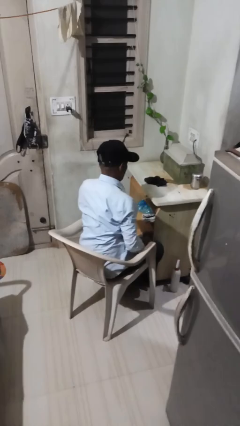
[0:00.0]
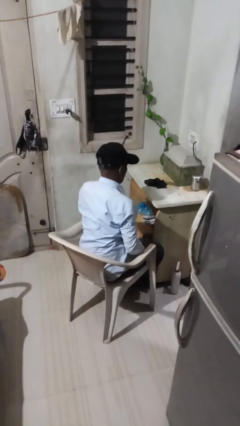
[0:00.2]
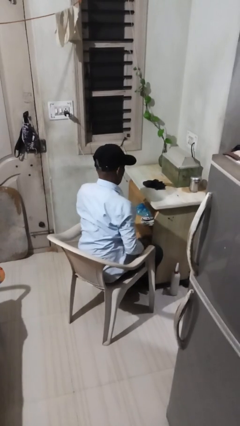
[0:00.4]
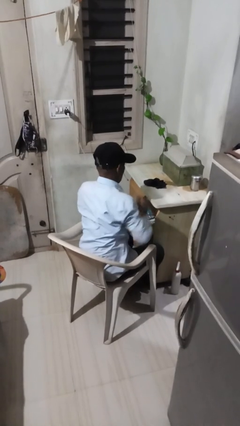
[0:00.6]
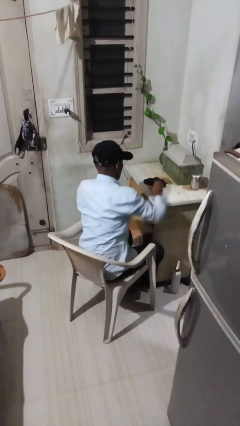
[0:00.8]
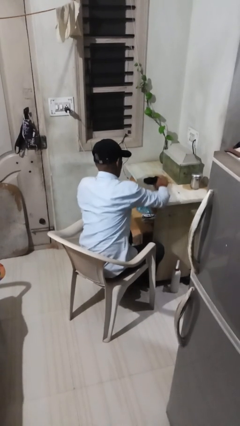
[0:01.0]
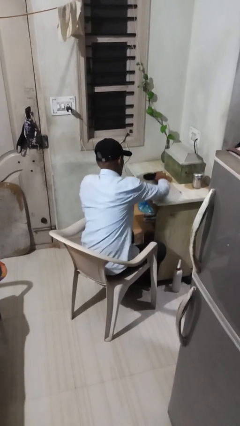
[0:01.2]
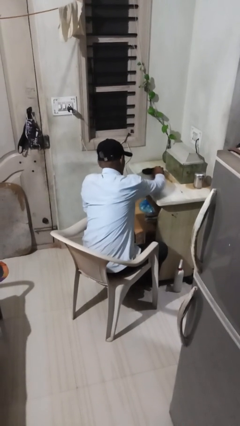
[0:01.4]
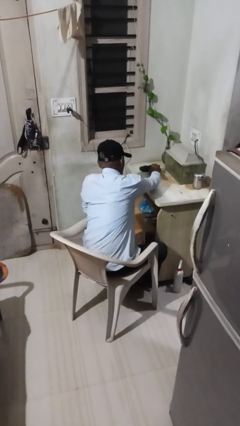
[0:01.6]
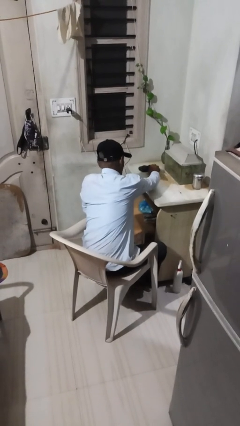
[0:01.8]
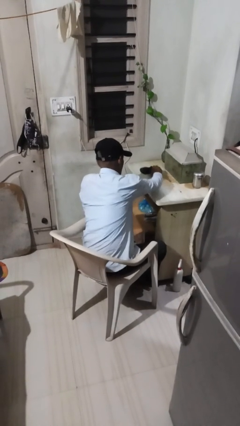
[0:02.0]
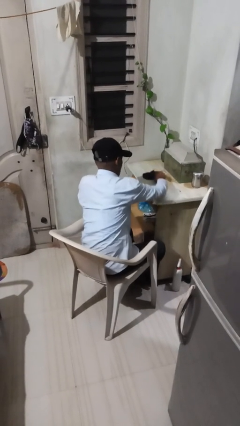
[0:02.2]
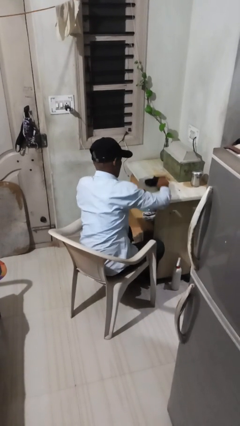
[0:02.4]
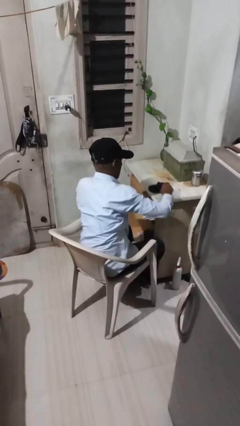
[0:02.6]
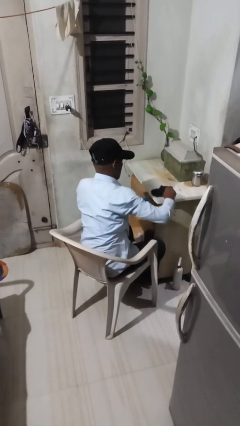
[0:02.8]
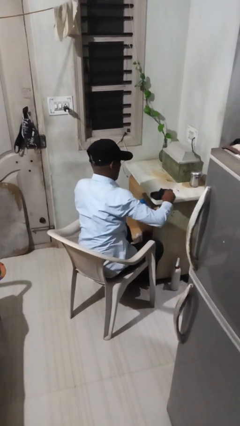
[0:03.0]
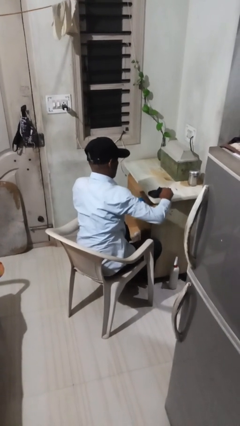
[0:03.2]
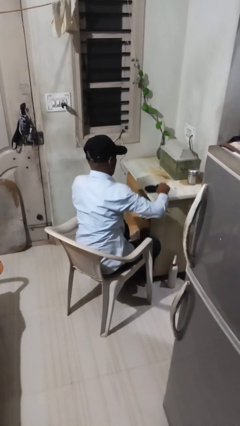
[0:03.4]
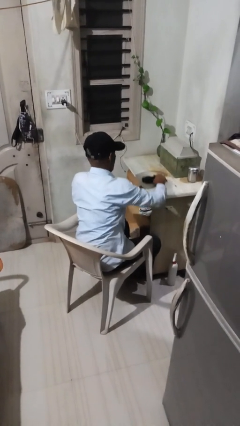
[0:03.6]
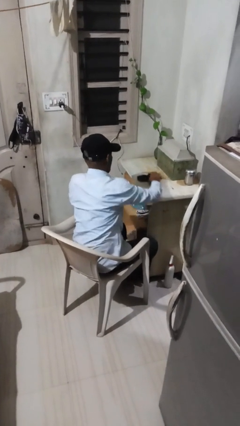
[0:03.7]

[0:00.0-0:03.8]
person cleans table with rag

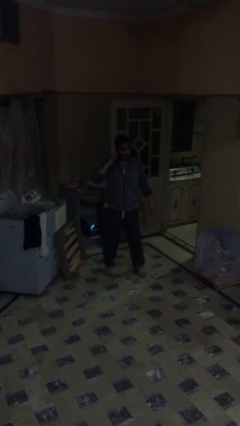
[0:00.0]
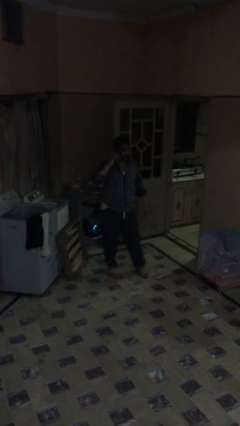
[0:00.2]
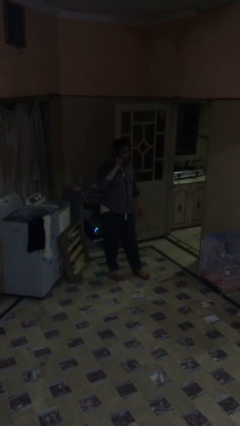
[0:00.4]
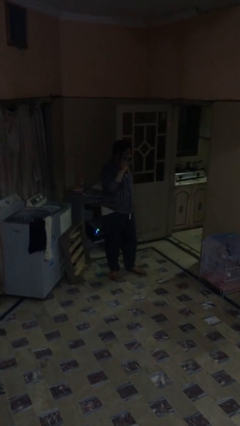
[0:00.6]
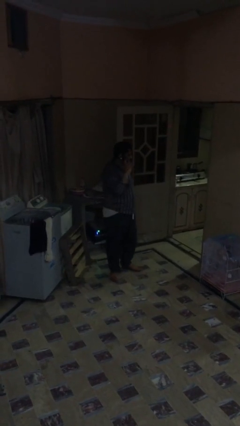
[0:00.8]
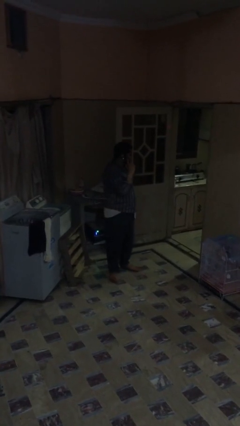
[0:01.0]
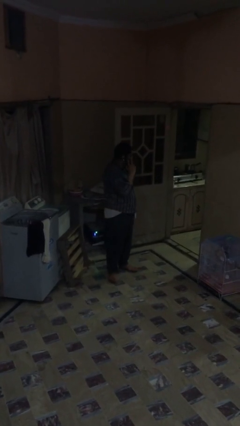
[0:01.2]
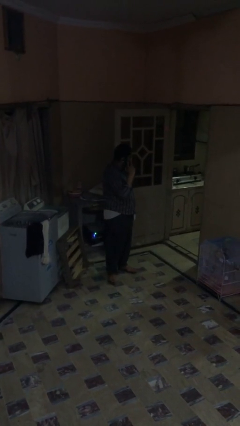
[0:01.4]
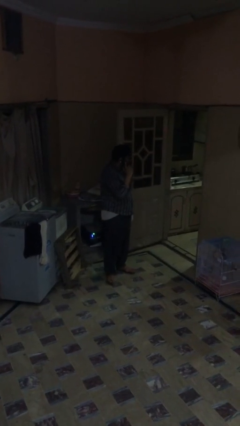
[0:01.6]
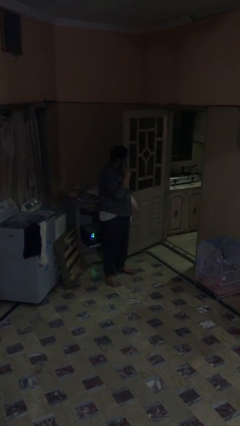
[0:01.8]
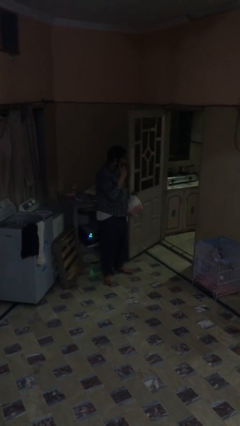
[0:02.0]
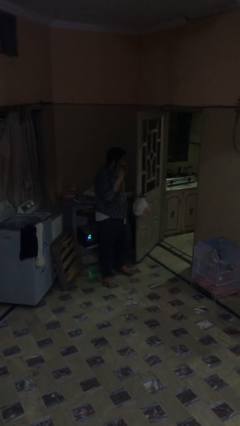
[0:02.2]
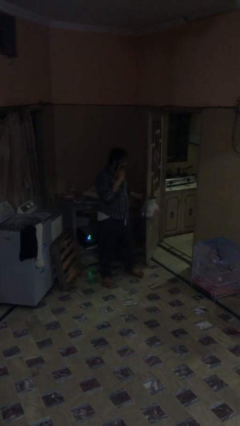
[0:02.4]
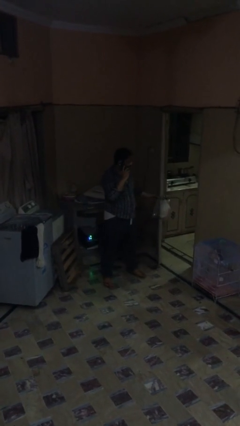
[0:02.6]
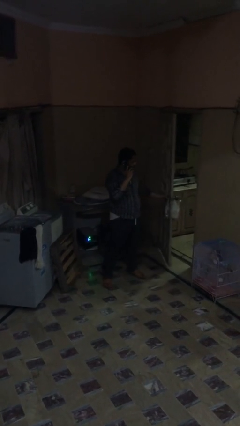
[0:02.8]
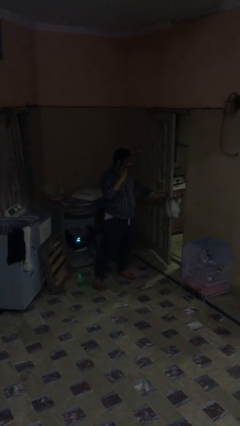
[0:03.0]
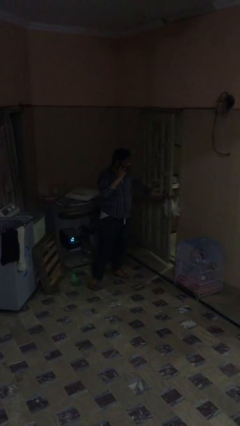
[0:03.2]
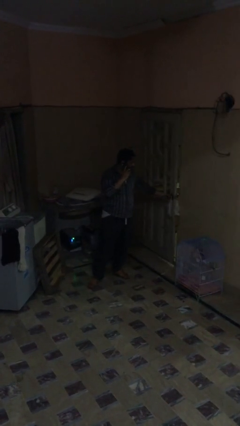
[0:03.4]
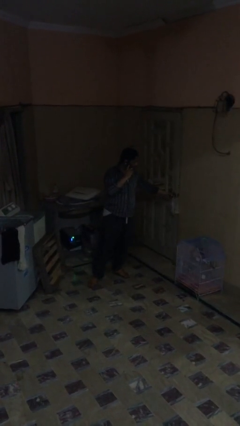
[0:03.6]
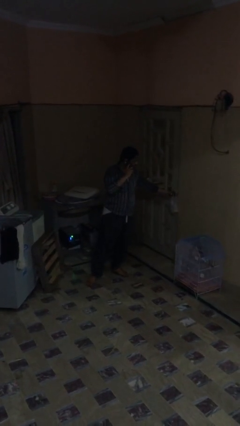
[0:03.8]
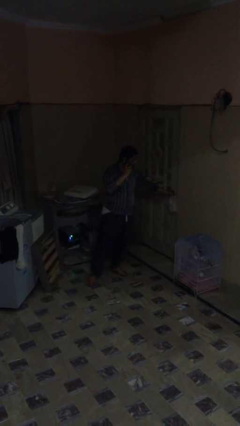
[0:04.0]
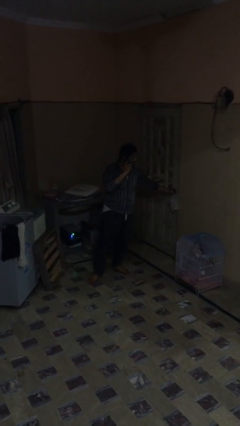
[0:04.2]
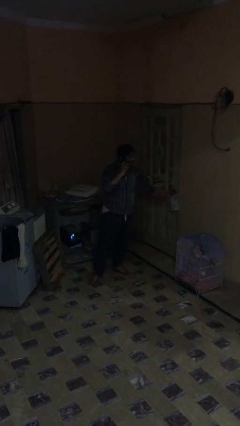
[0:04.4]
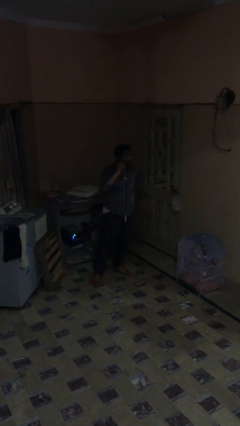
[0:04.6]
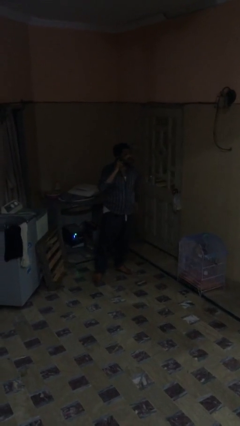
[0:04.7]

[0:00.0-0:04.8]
person closes facility door

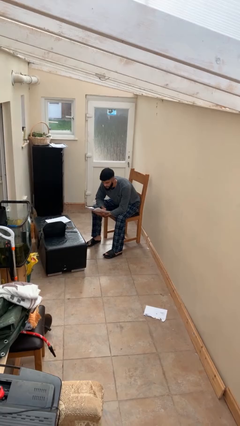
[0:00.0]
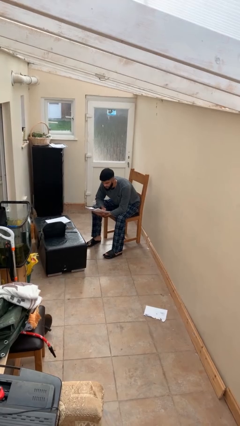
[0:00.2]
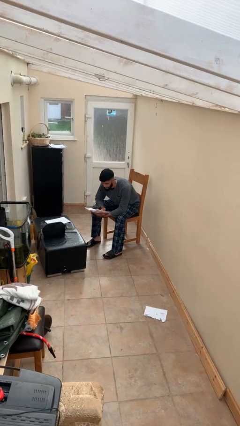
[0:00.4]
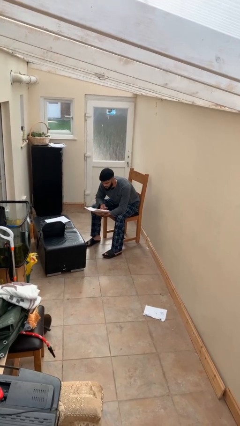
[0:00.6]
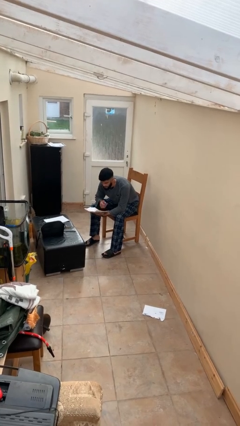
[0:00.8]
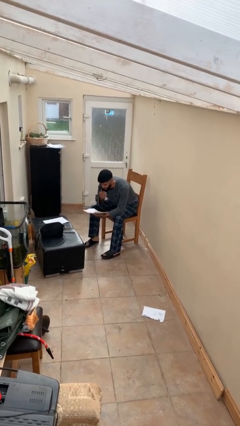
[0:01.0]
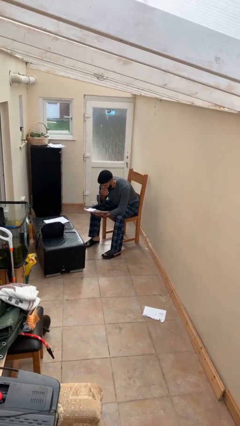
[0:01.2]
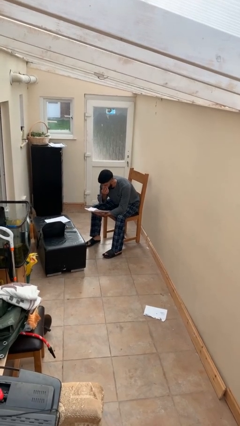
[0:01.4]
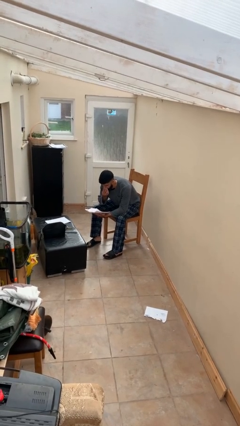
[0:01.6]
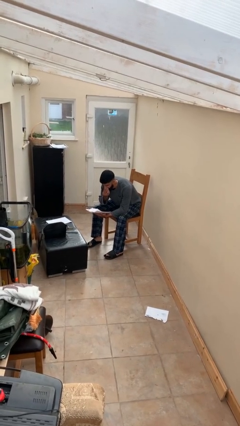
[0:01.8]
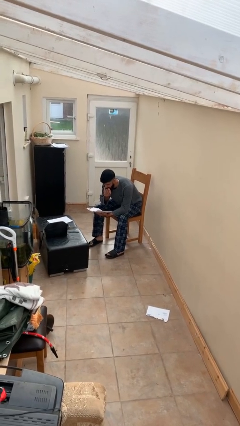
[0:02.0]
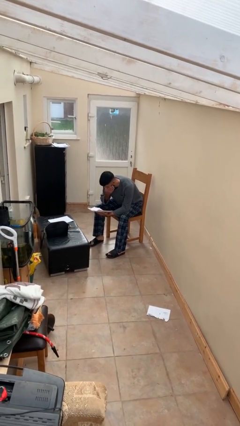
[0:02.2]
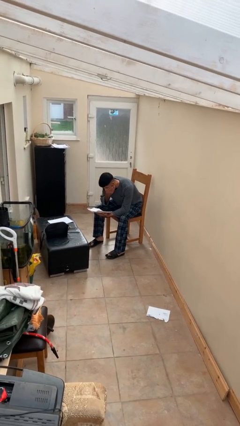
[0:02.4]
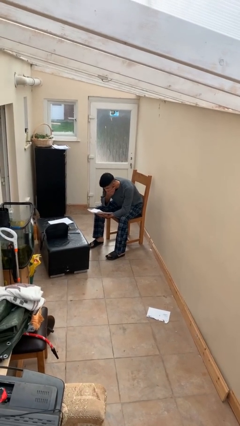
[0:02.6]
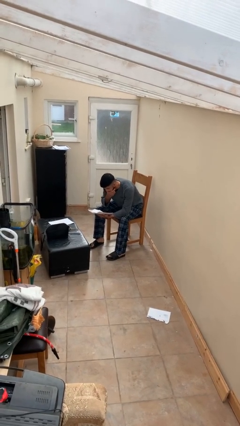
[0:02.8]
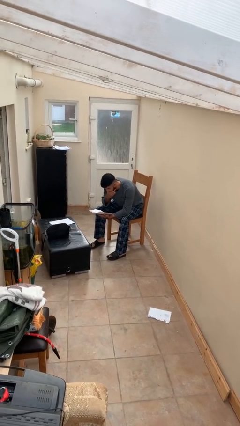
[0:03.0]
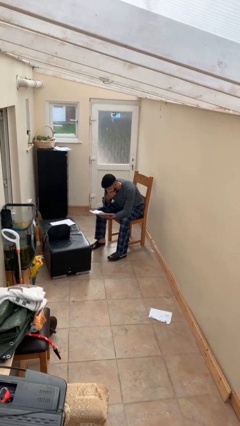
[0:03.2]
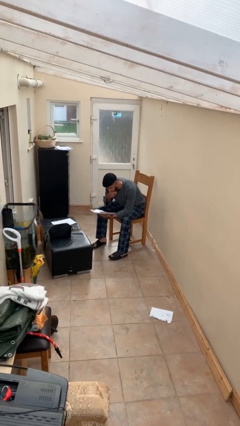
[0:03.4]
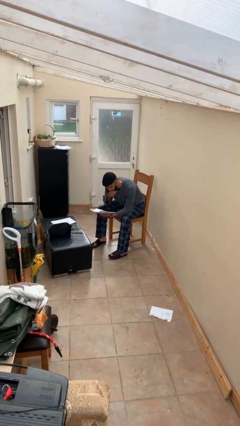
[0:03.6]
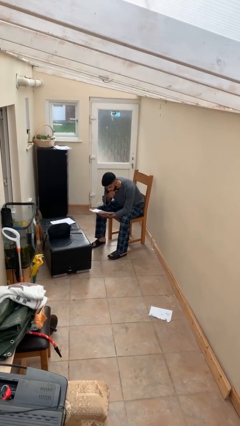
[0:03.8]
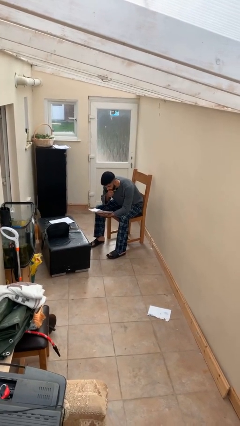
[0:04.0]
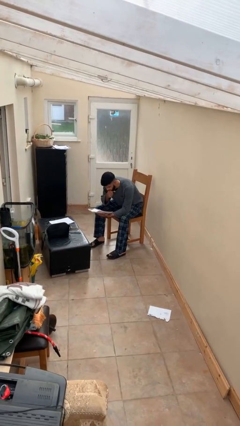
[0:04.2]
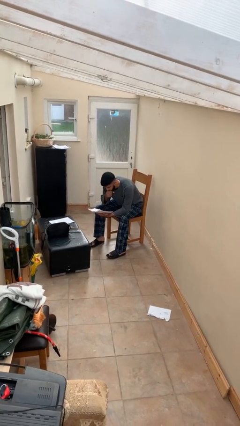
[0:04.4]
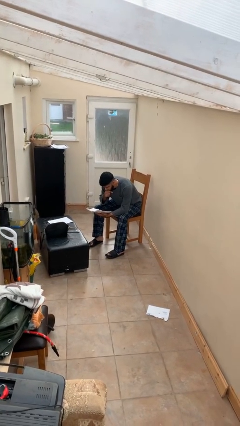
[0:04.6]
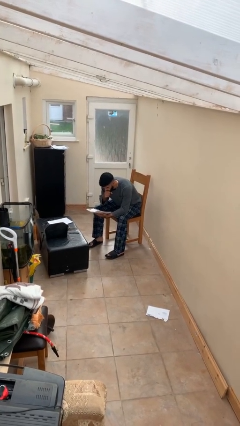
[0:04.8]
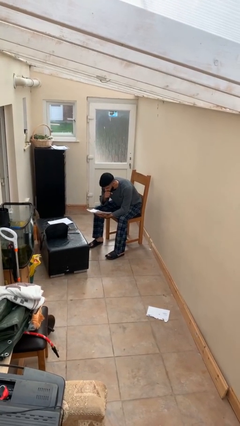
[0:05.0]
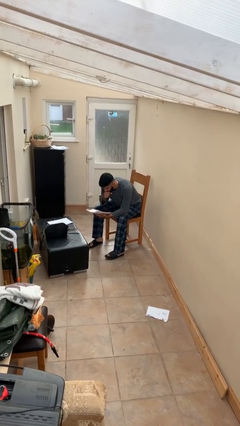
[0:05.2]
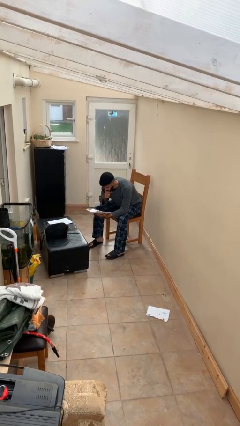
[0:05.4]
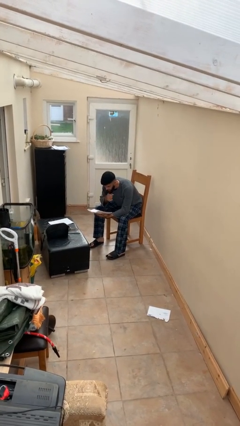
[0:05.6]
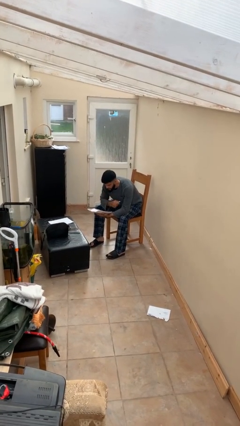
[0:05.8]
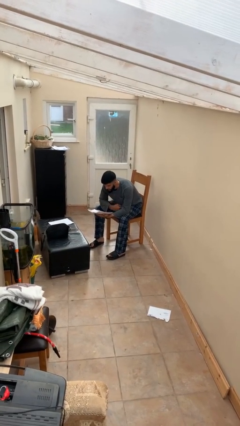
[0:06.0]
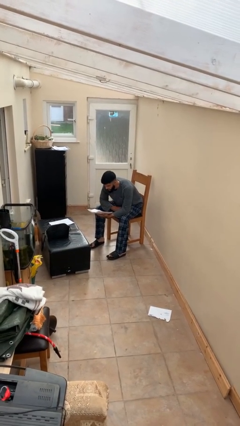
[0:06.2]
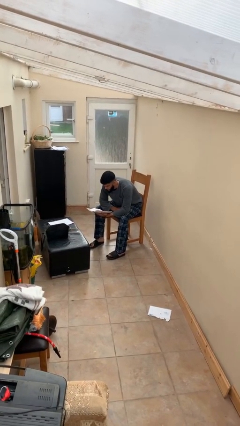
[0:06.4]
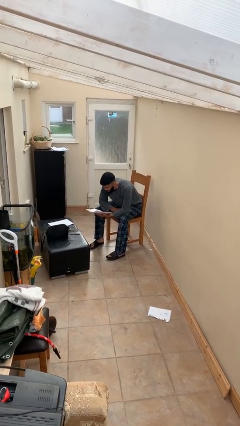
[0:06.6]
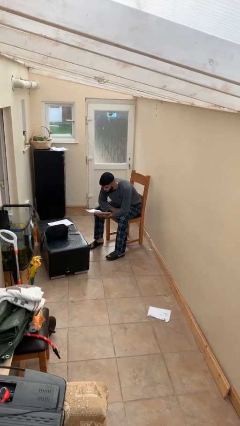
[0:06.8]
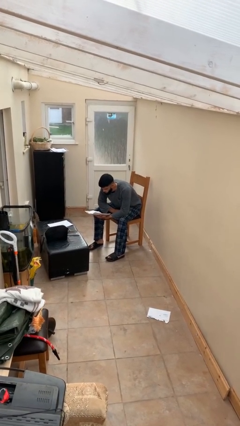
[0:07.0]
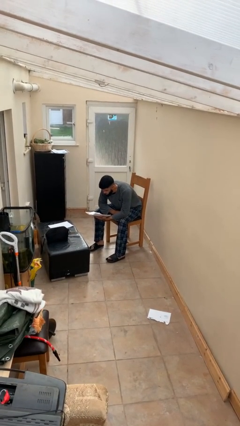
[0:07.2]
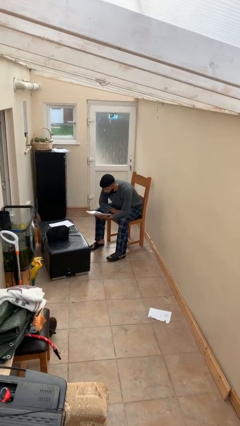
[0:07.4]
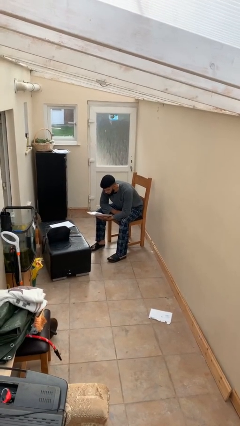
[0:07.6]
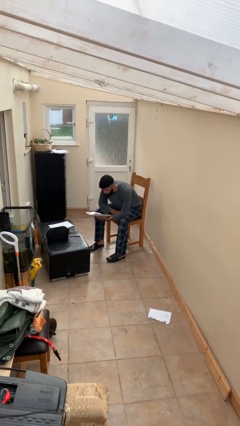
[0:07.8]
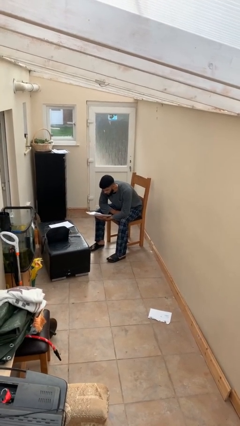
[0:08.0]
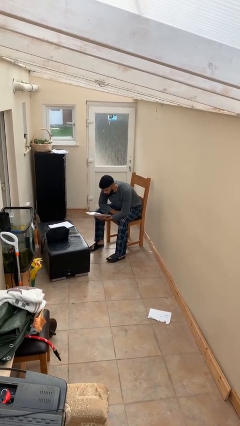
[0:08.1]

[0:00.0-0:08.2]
person reads document

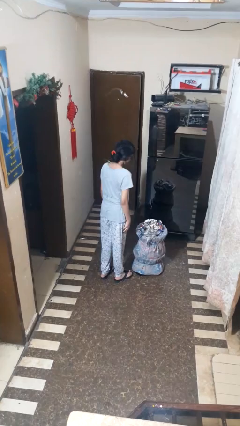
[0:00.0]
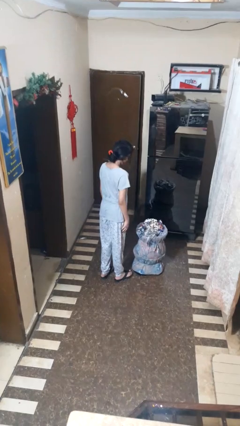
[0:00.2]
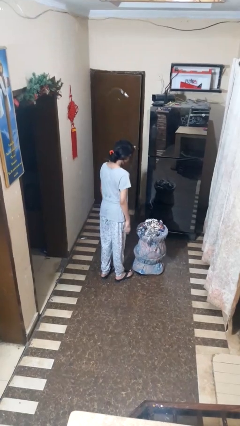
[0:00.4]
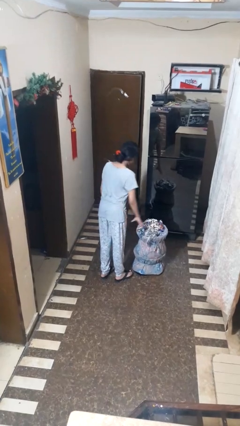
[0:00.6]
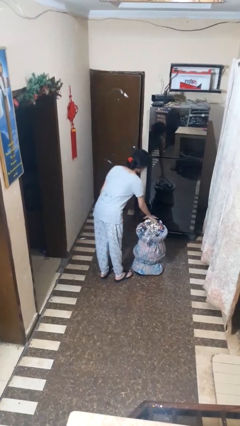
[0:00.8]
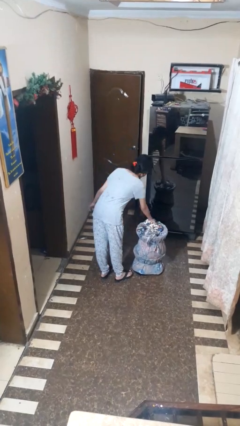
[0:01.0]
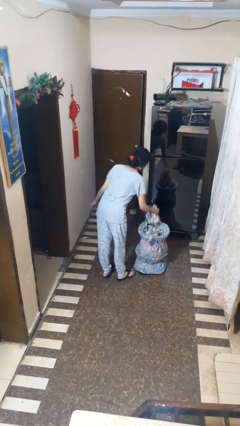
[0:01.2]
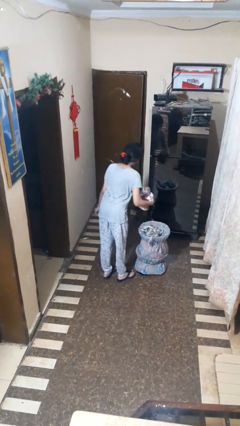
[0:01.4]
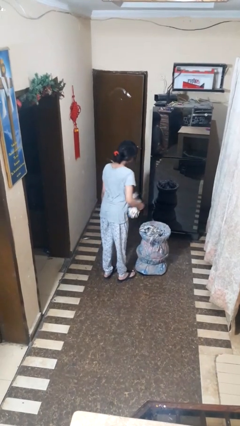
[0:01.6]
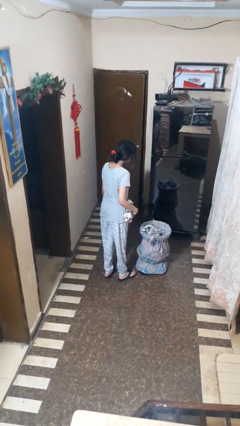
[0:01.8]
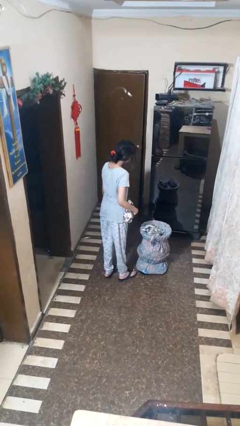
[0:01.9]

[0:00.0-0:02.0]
person takes object from basket
